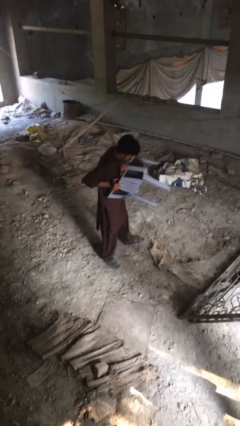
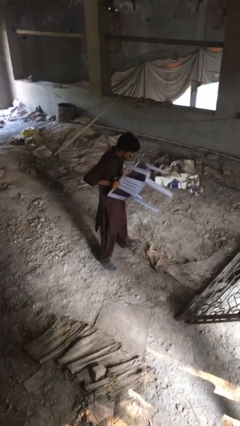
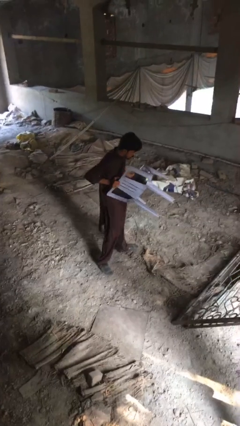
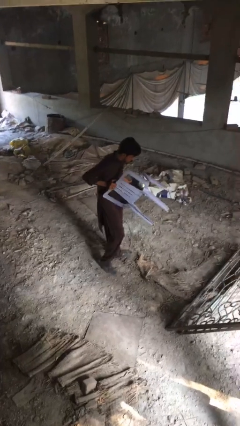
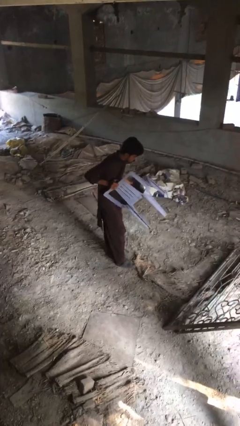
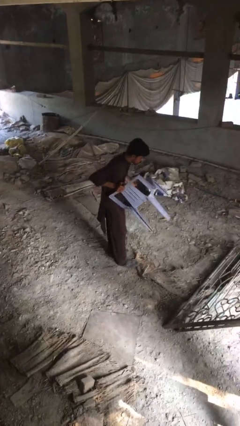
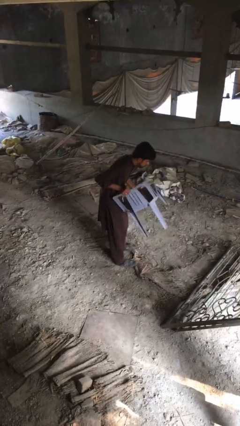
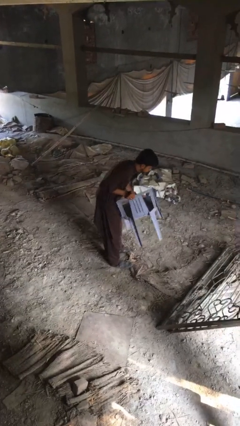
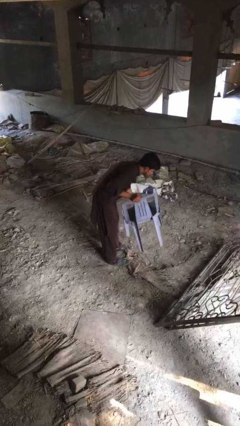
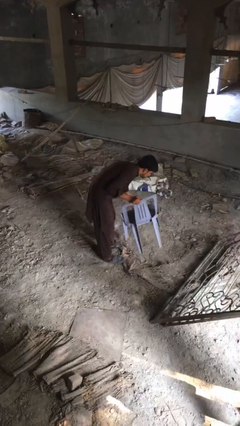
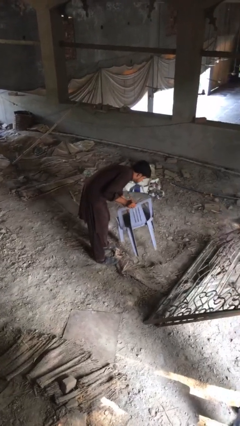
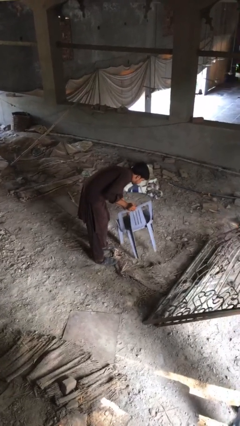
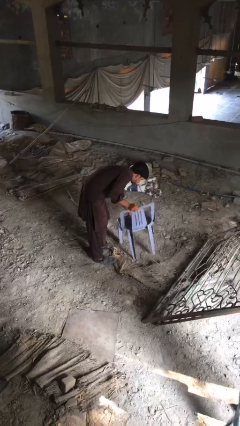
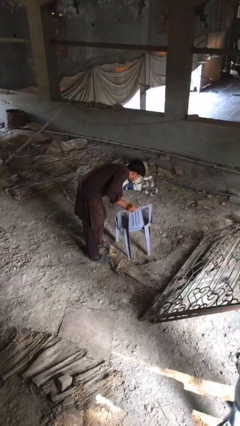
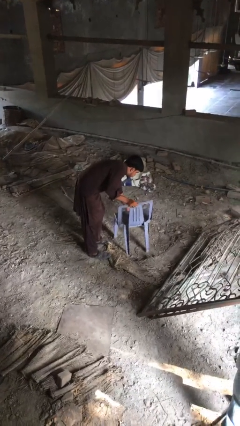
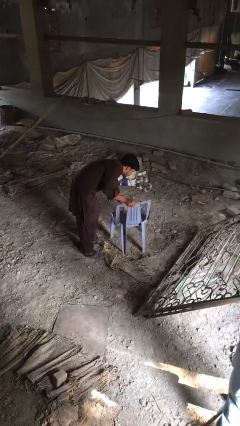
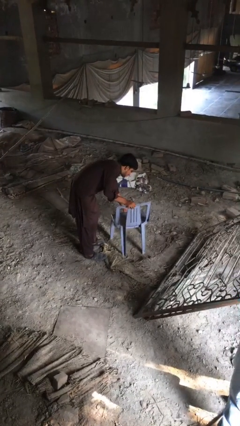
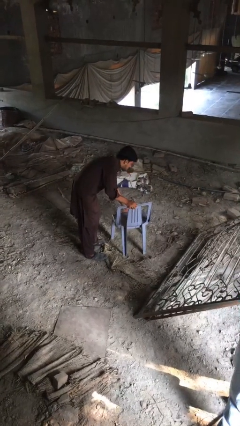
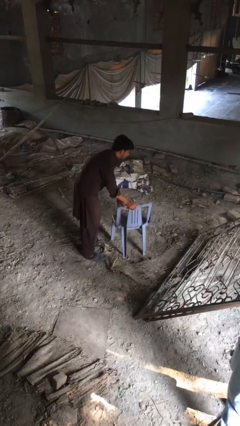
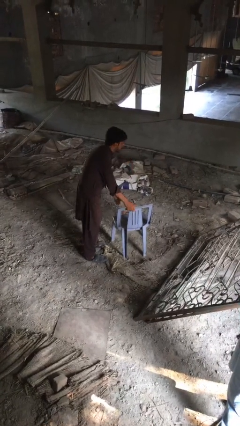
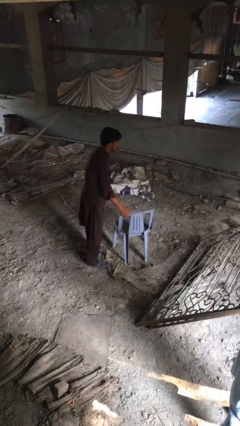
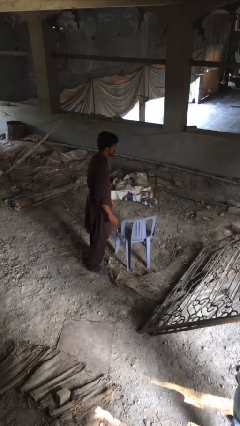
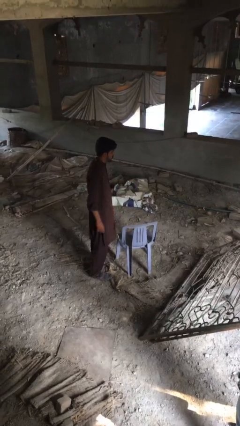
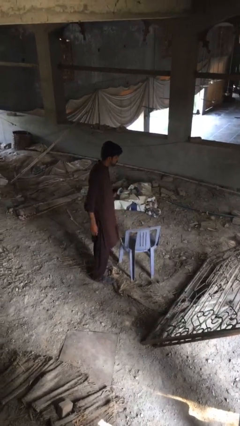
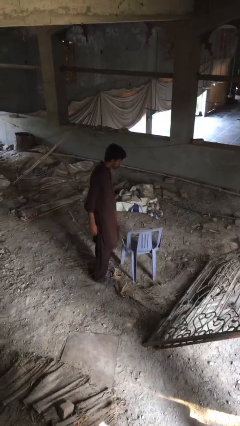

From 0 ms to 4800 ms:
person puts down object on floor

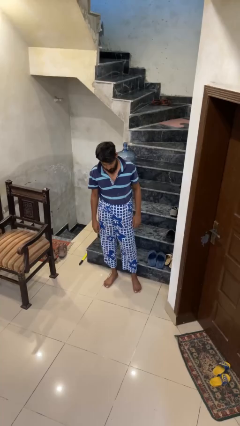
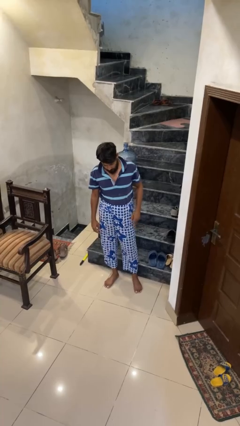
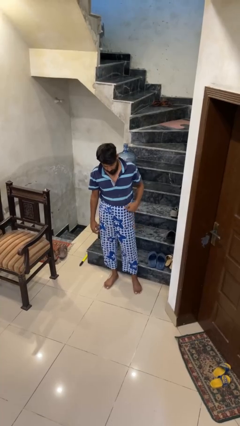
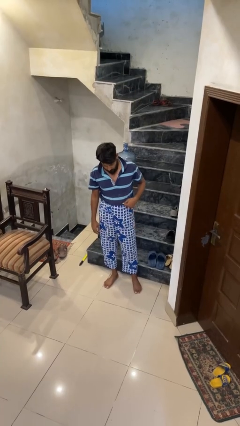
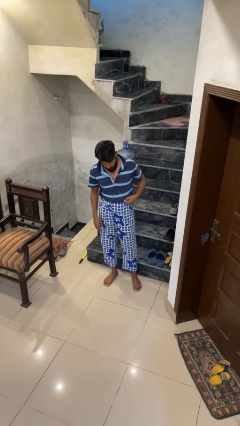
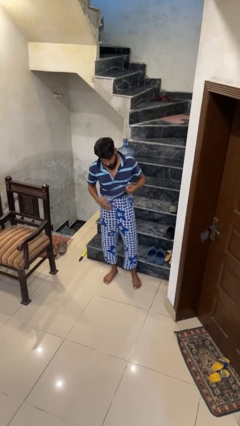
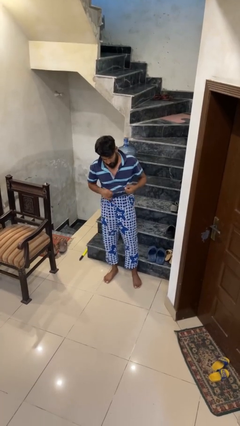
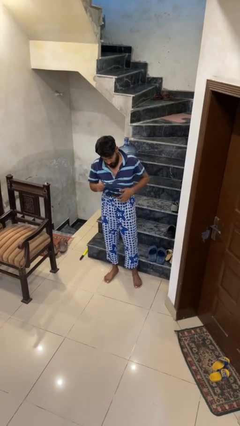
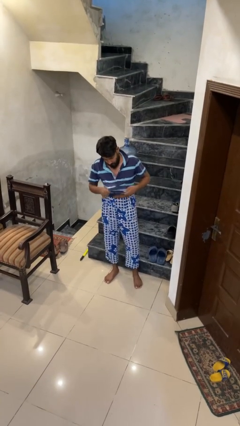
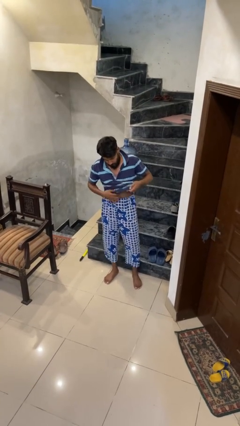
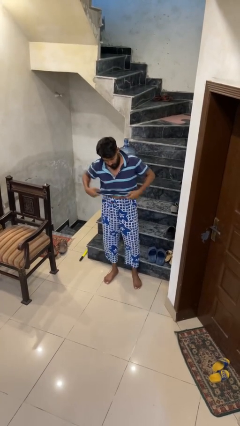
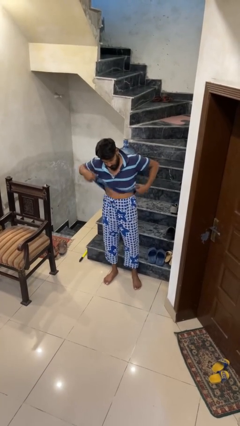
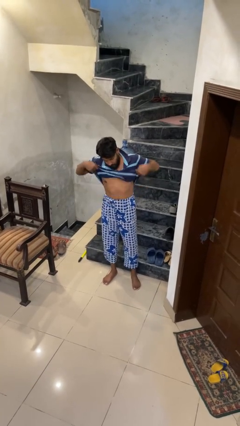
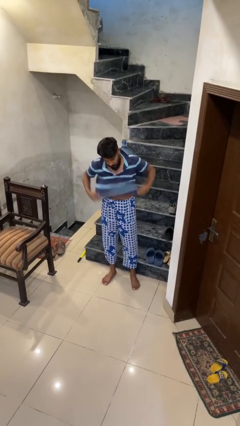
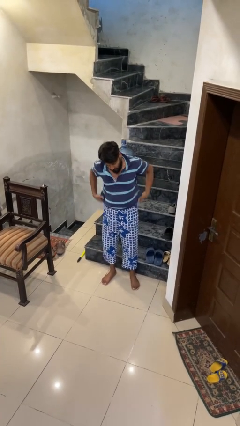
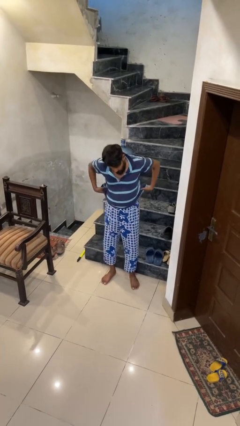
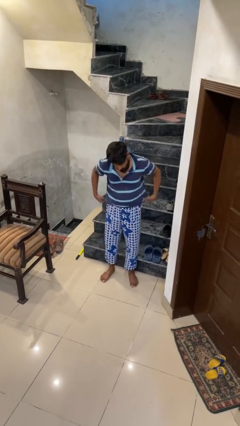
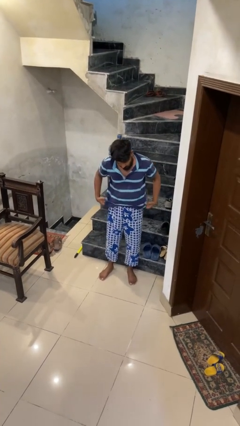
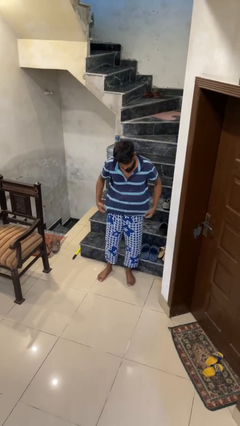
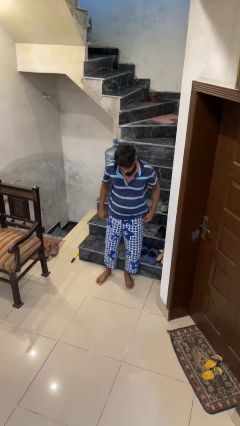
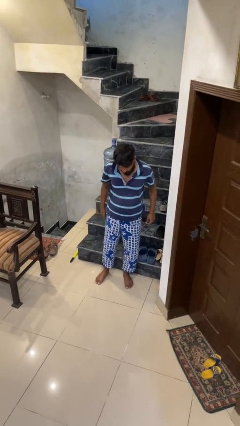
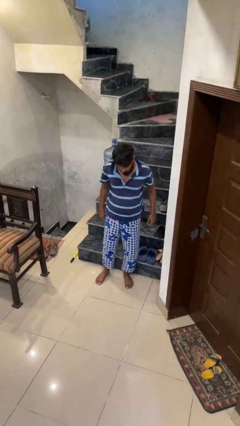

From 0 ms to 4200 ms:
person untucks shirt

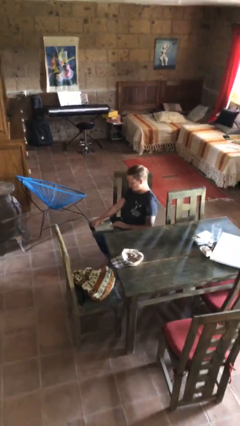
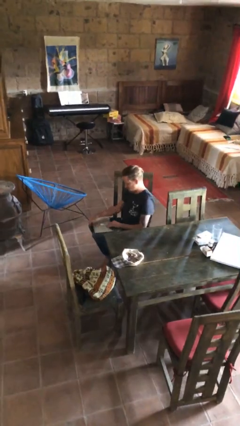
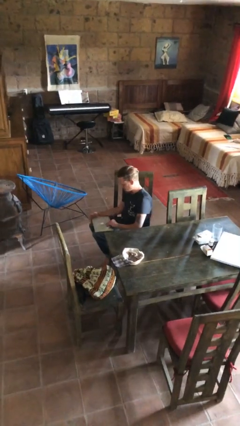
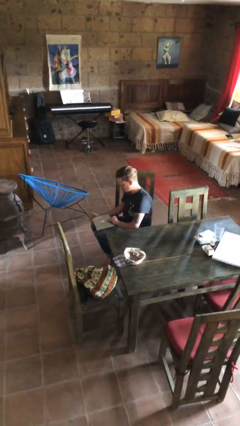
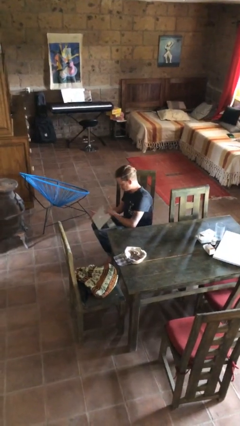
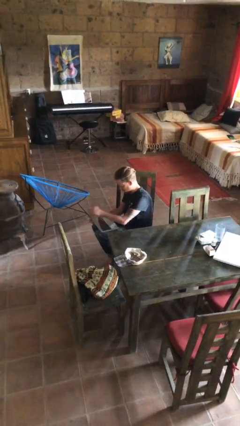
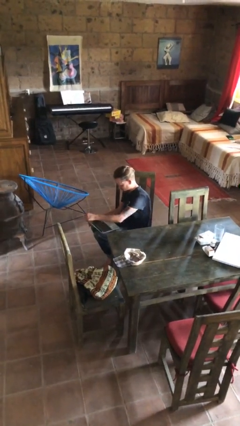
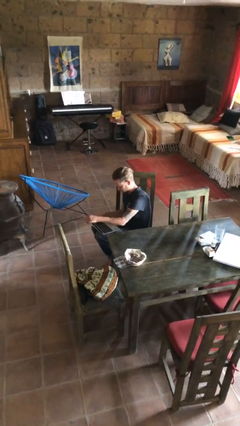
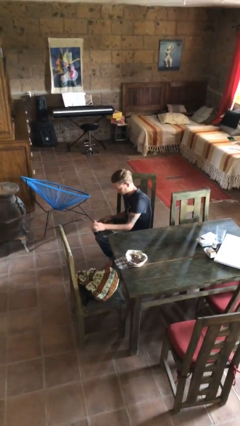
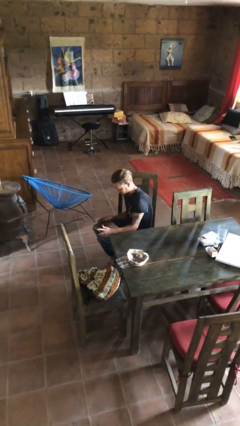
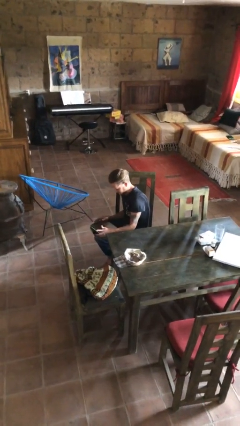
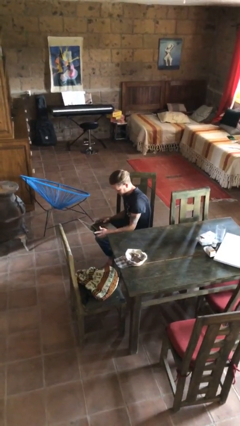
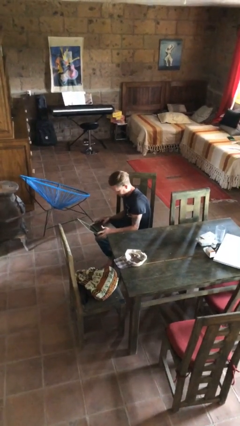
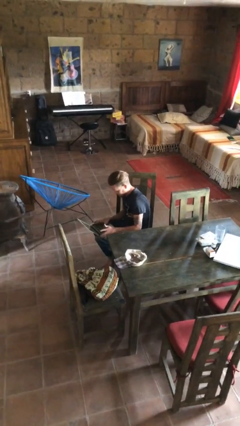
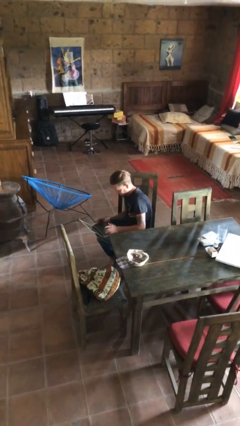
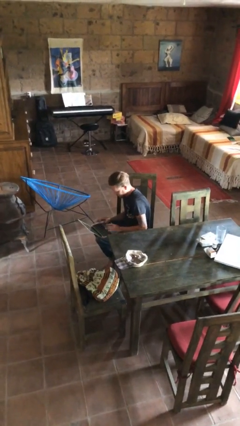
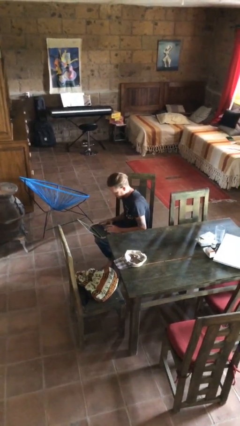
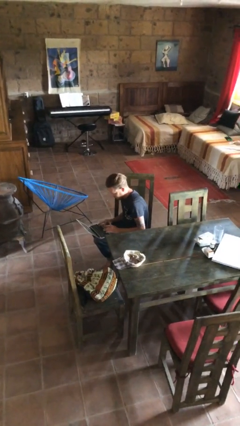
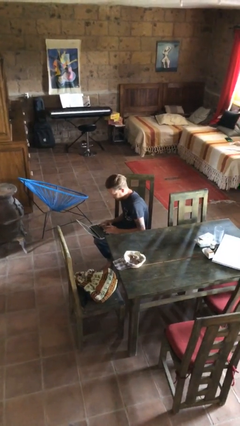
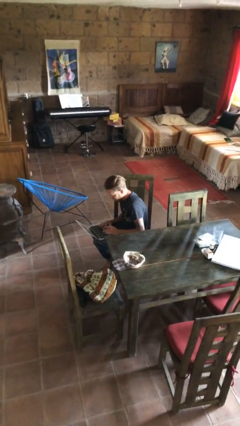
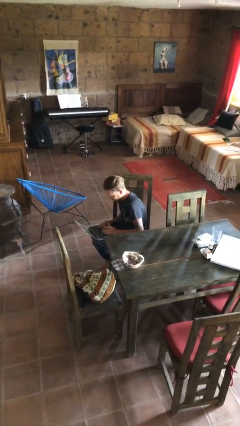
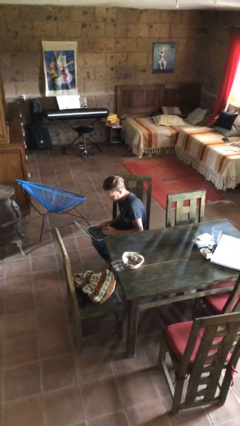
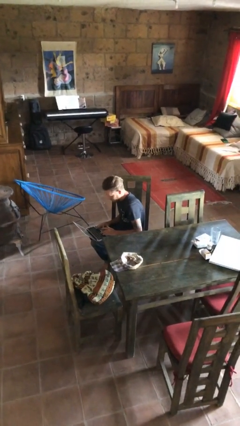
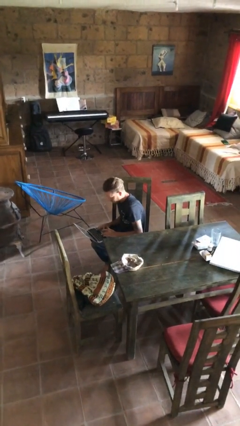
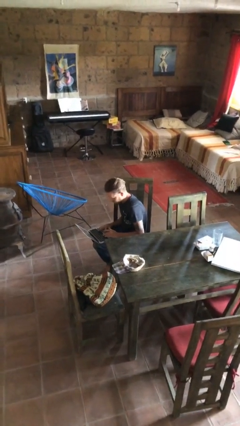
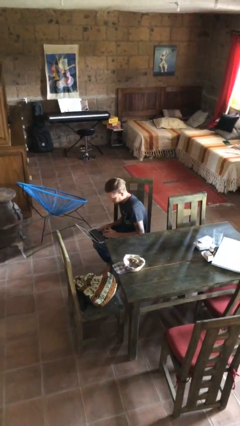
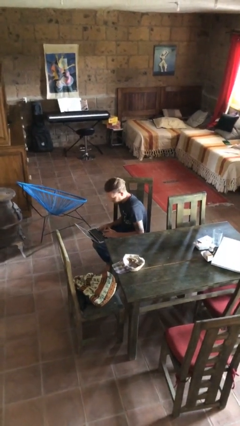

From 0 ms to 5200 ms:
person interacts with laptop

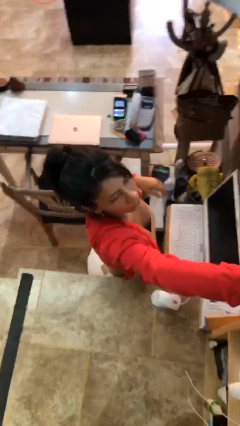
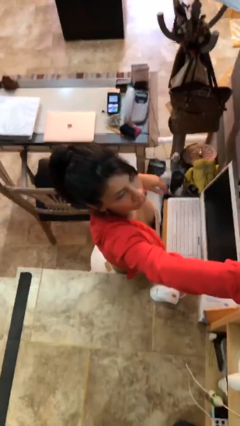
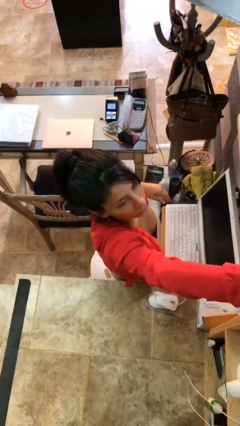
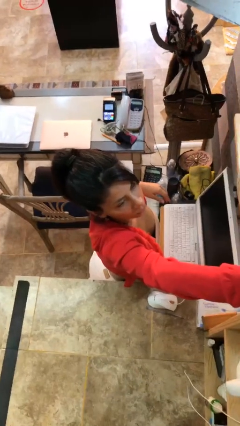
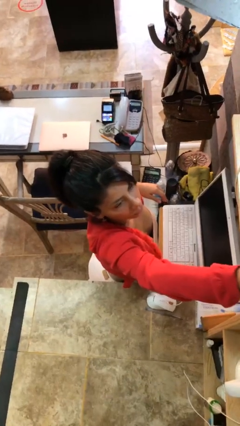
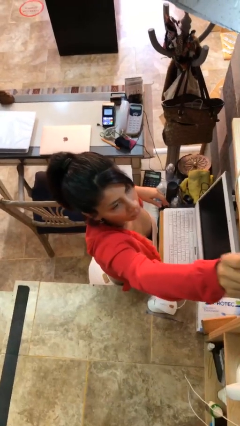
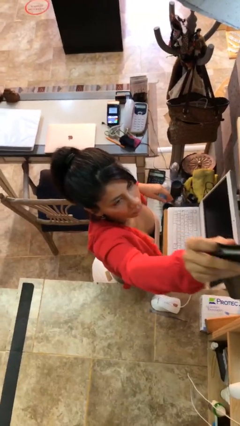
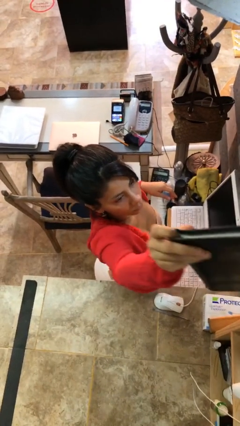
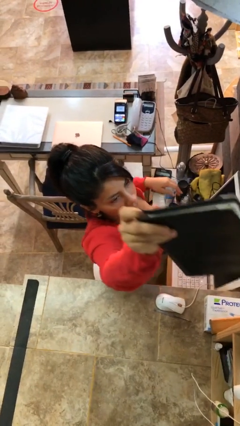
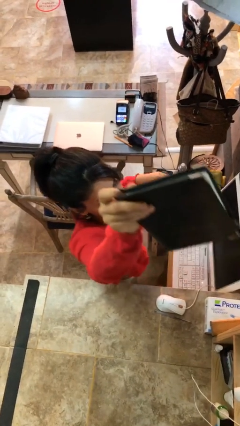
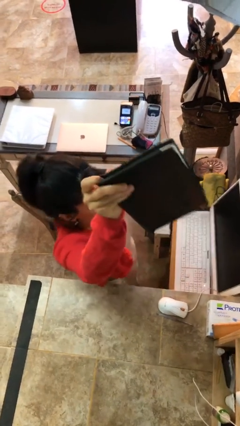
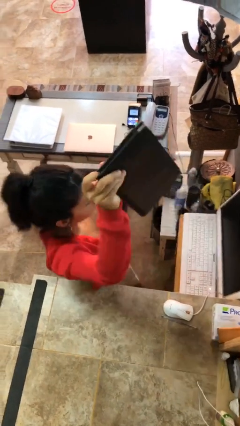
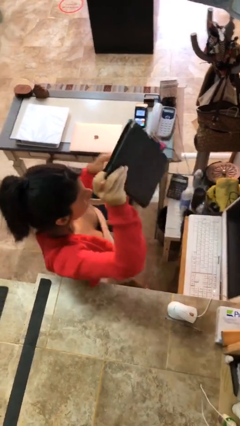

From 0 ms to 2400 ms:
person picks up object from shelf

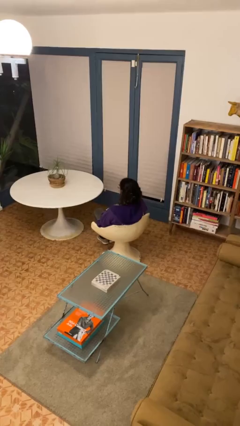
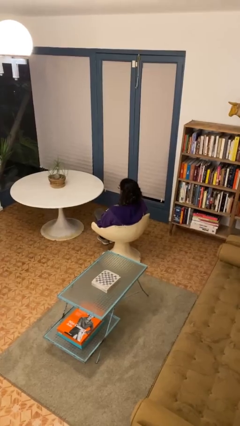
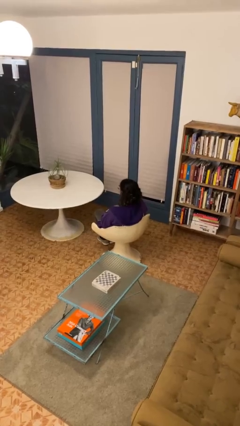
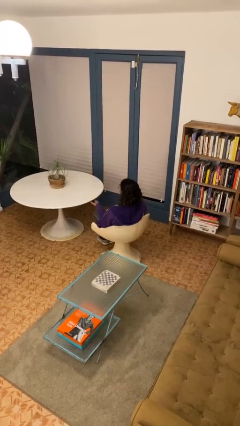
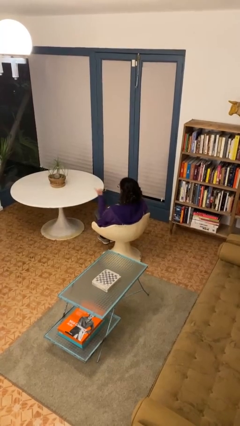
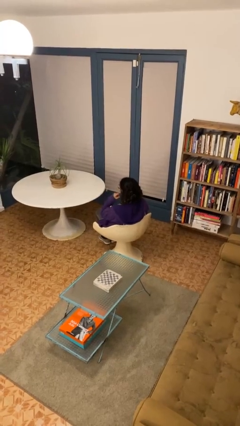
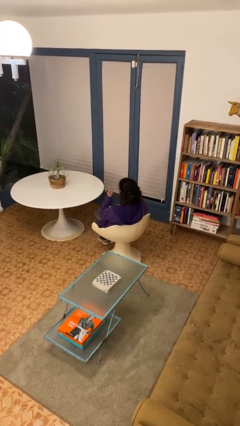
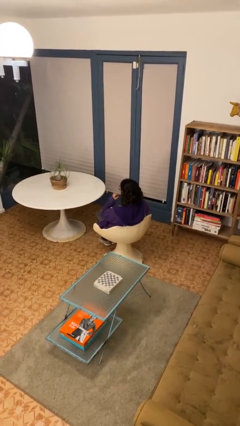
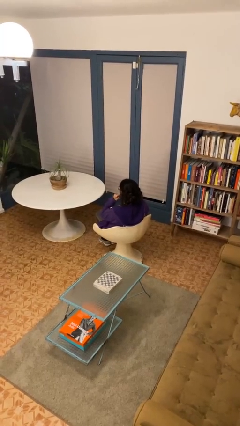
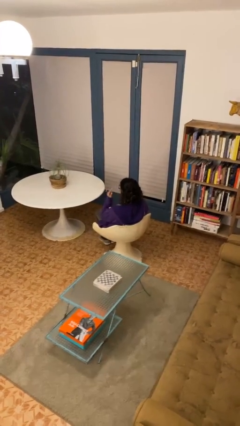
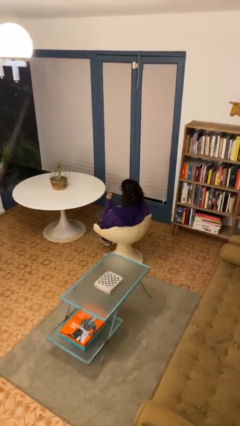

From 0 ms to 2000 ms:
person gestures listen closely
